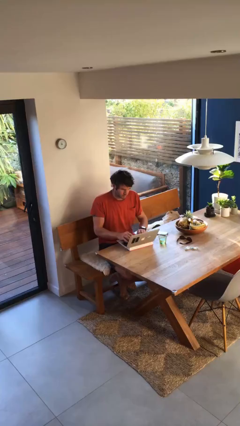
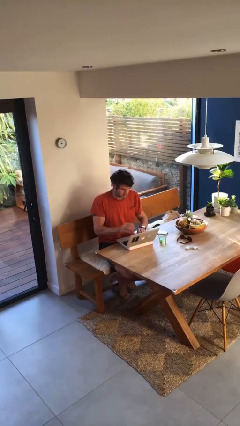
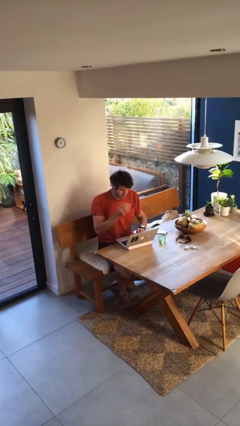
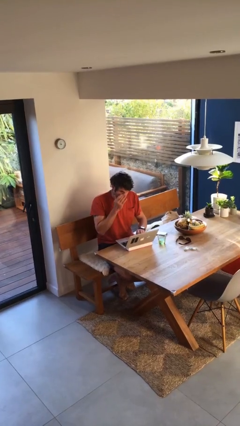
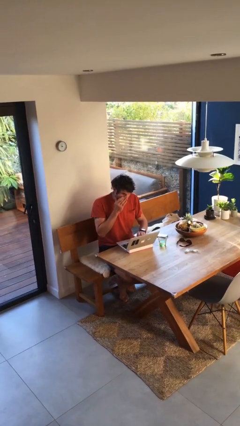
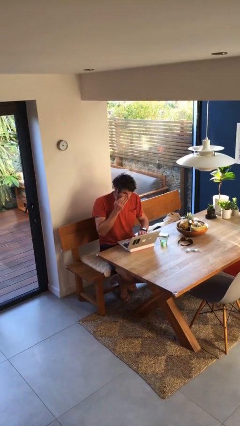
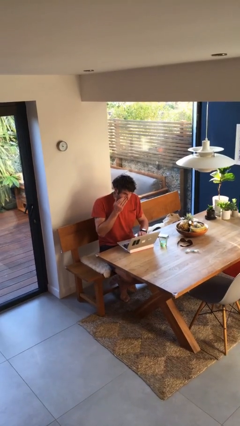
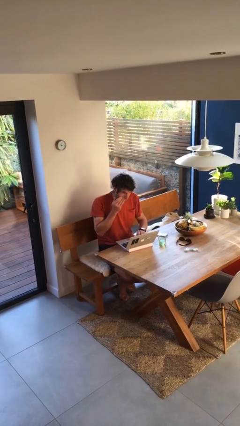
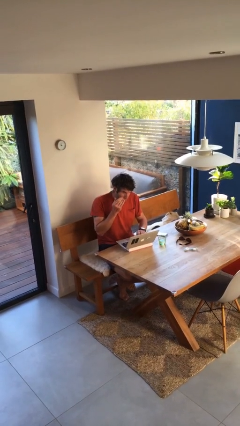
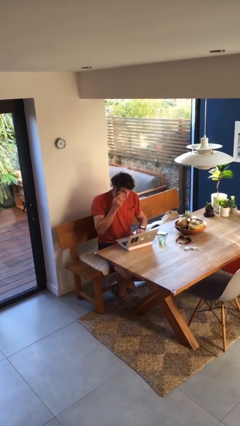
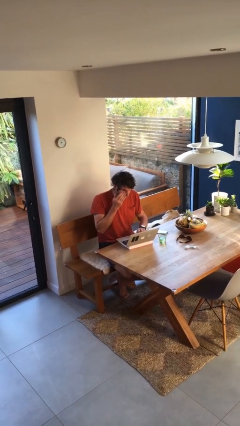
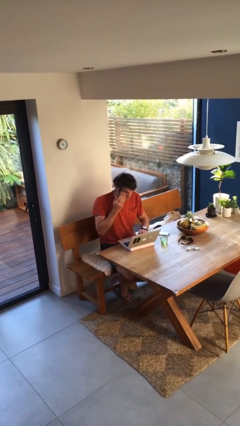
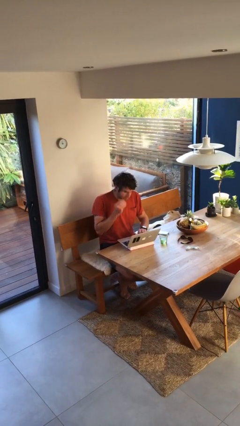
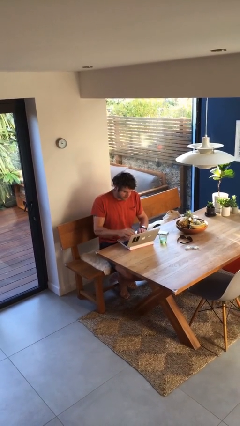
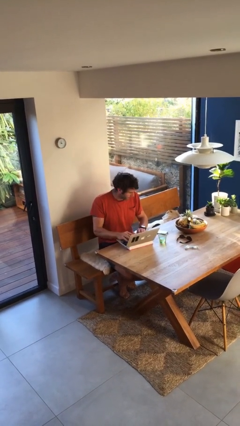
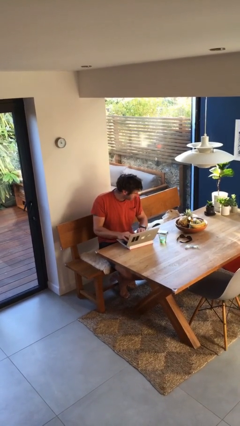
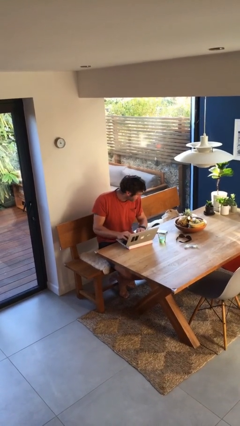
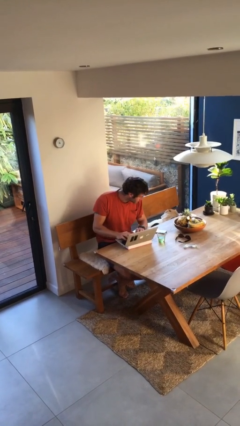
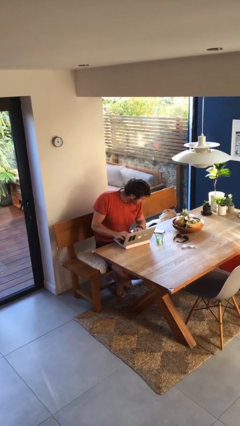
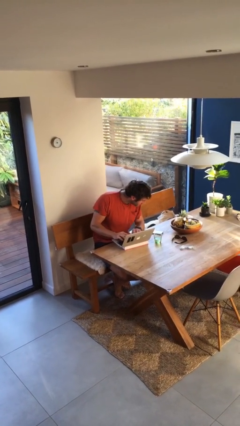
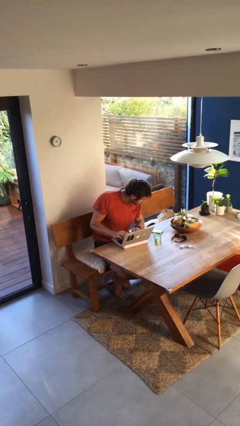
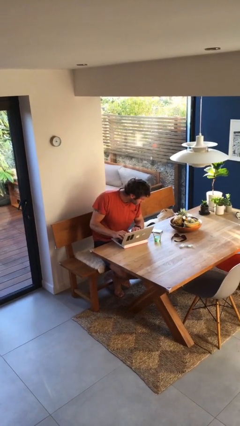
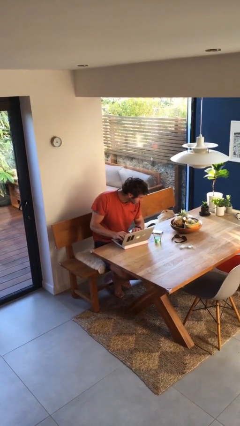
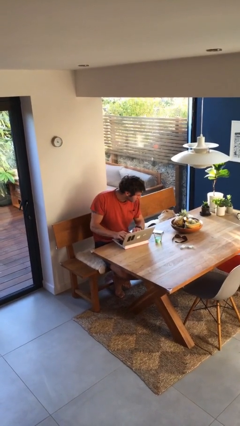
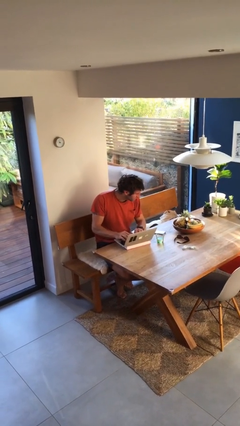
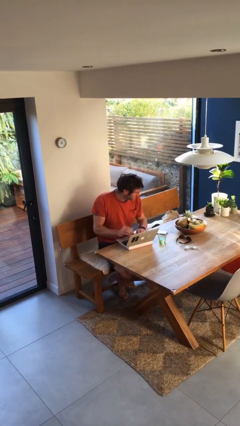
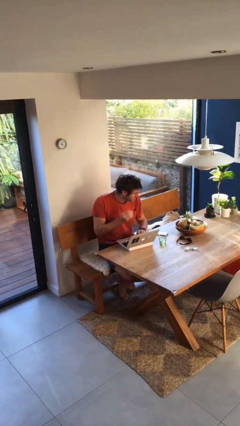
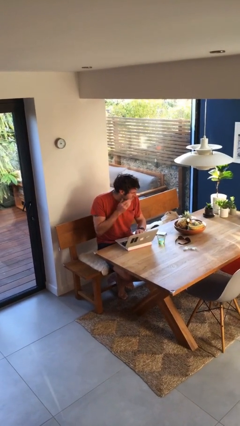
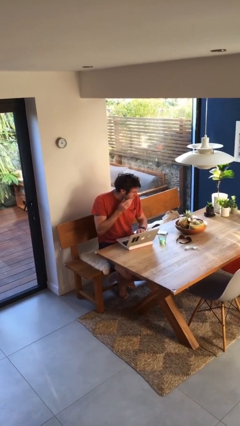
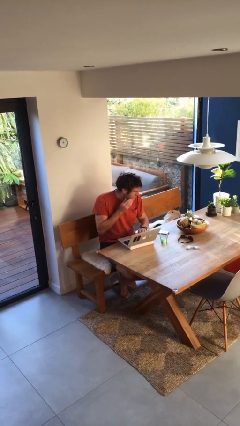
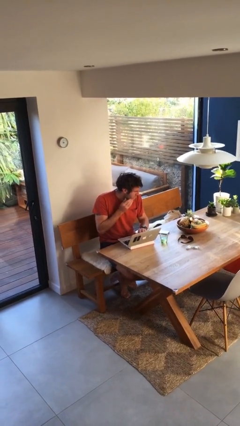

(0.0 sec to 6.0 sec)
person interacts with laptop

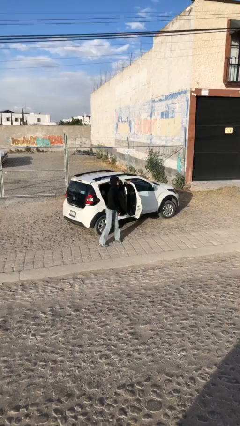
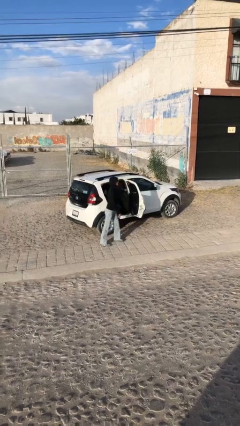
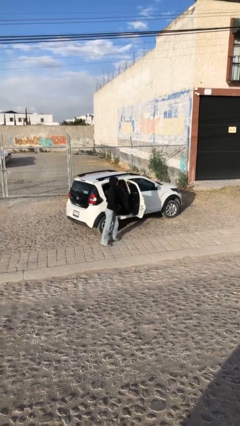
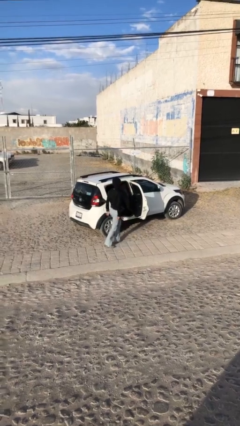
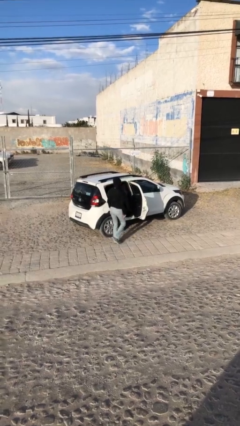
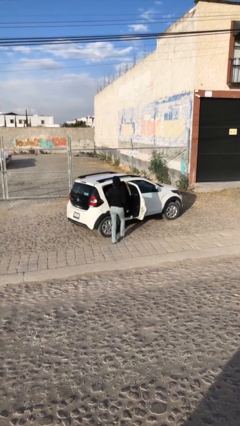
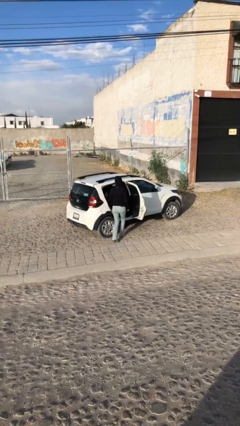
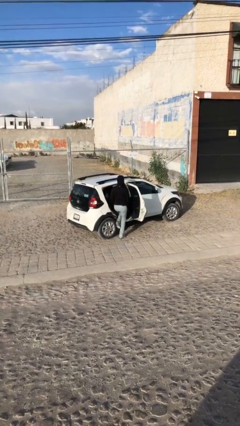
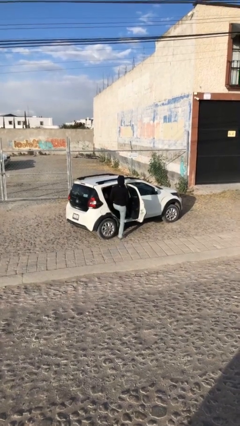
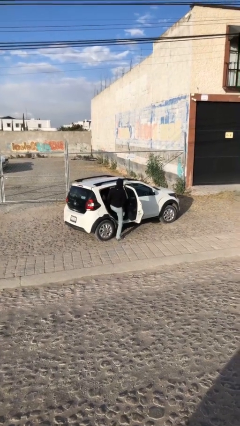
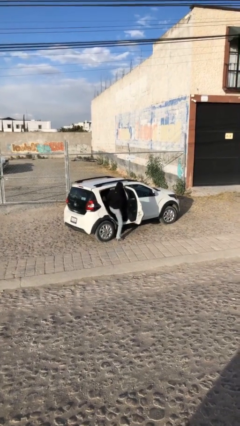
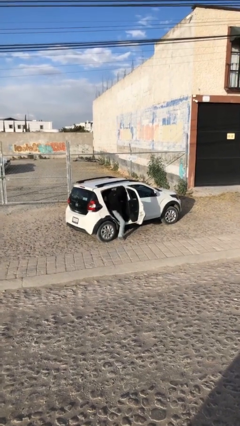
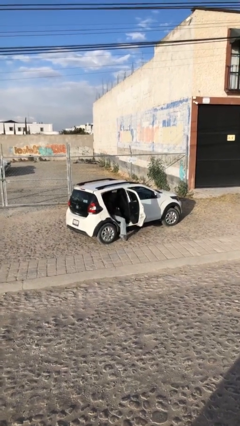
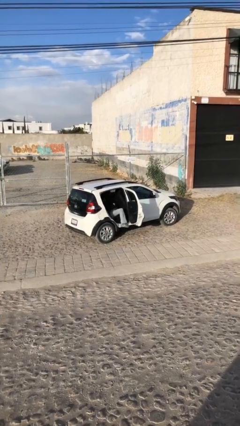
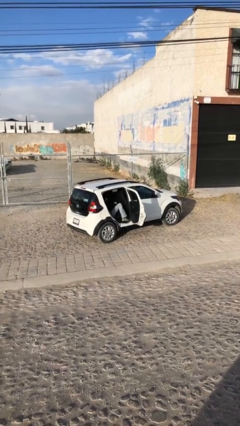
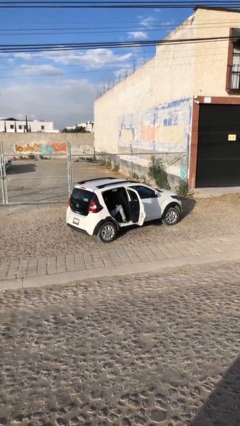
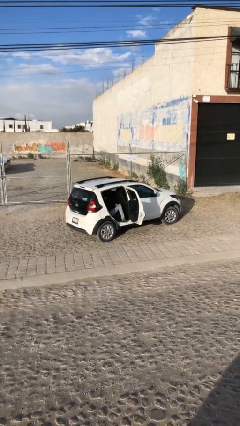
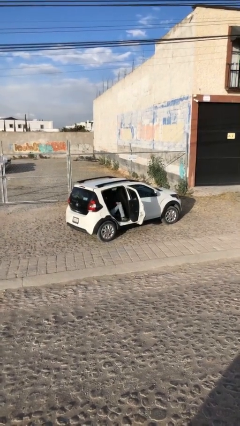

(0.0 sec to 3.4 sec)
person enters car

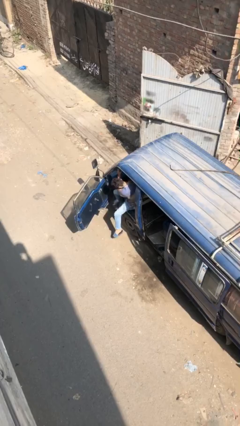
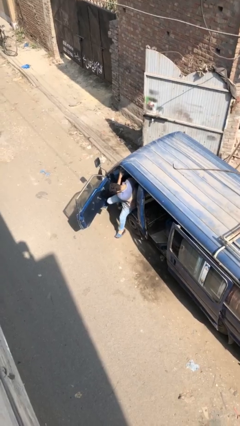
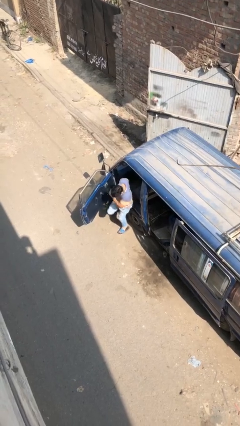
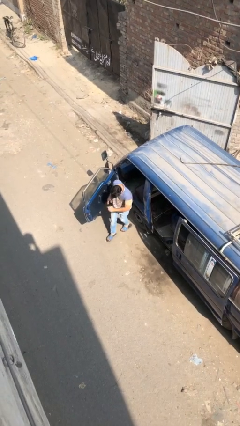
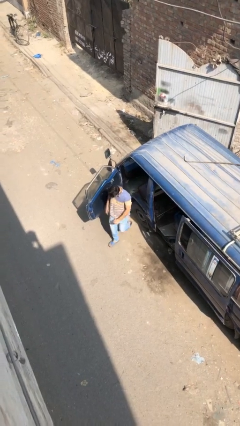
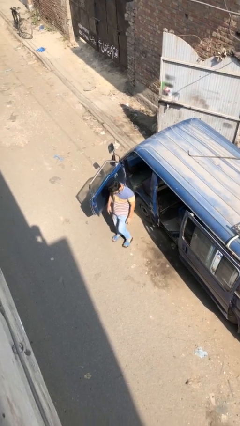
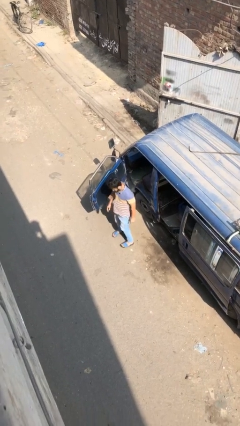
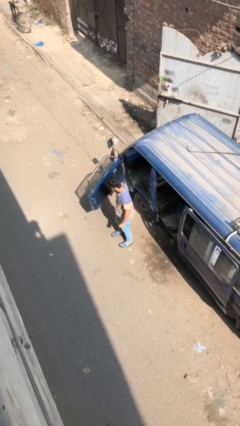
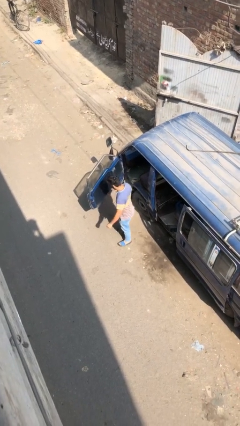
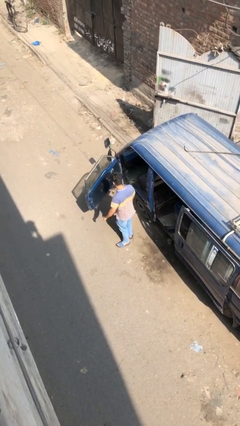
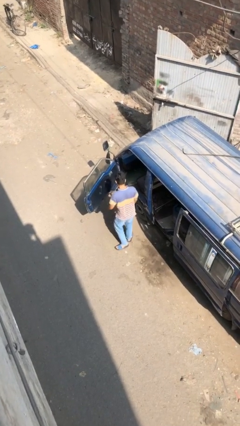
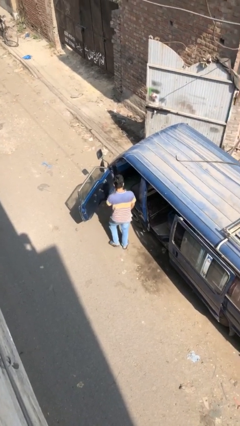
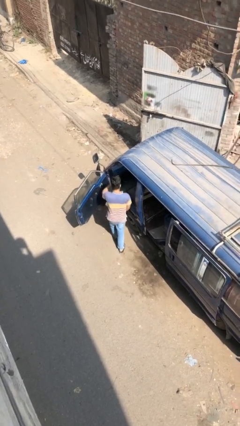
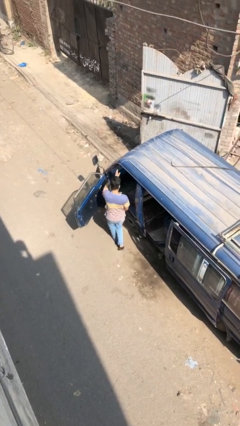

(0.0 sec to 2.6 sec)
person exits car

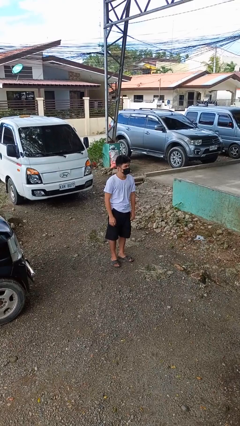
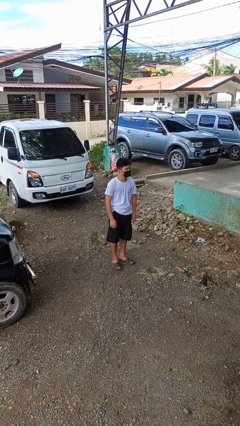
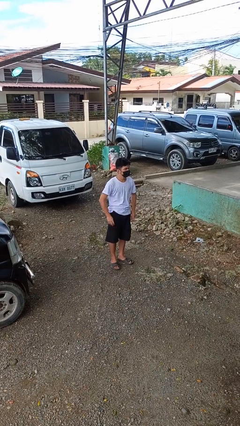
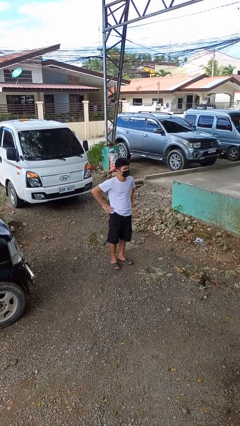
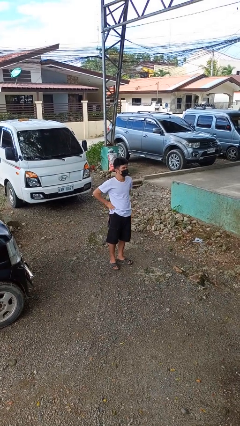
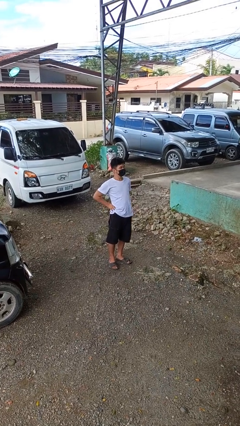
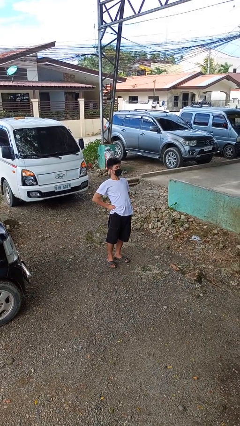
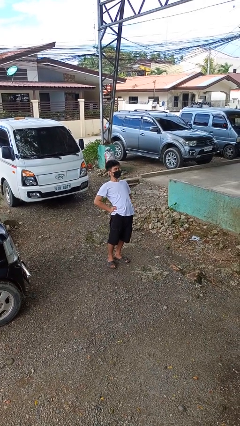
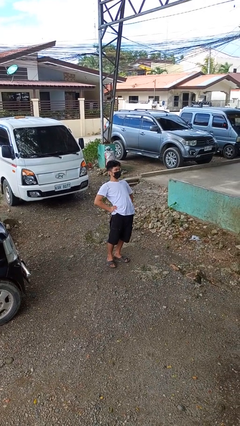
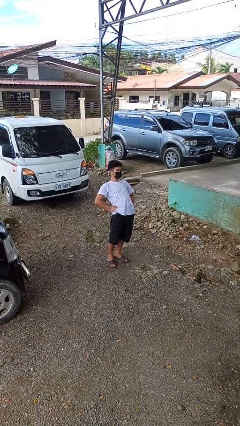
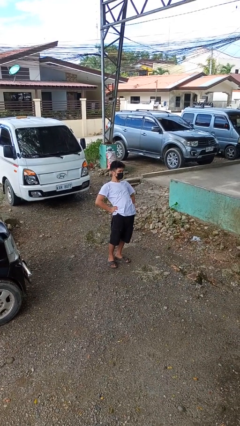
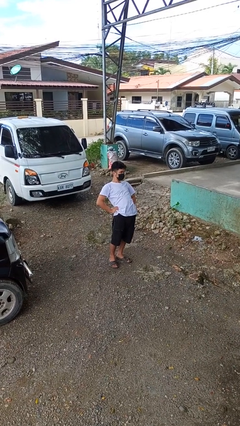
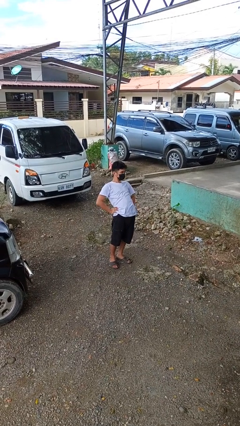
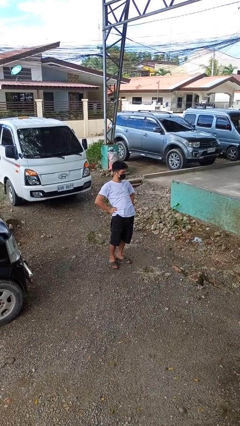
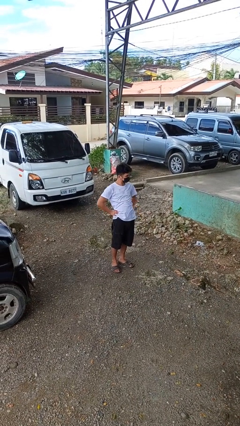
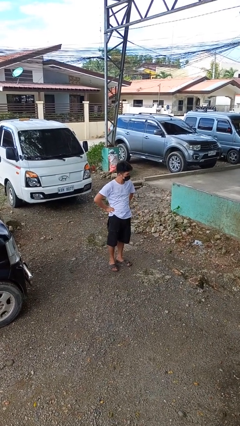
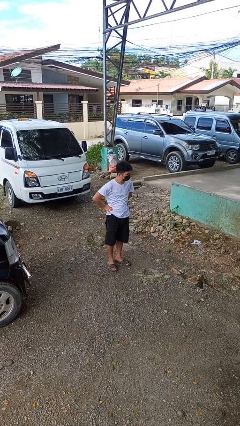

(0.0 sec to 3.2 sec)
person stretches back

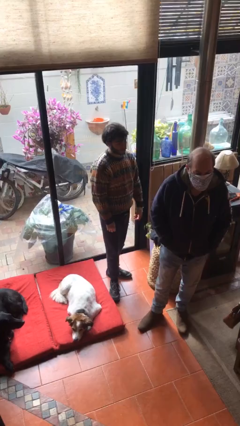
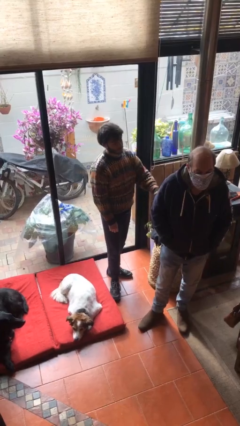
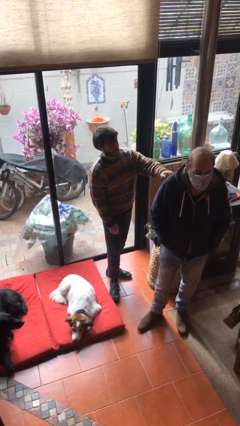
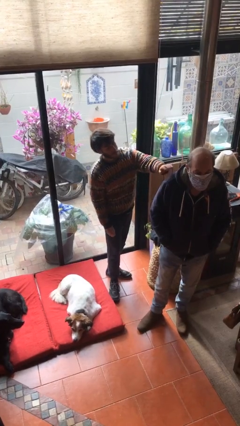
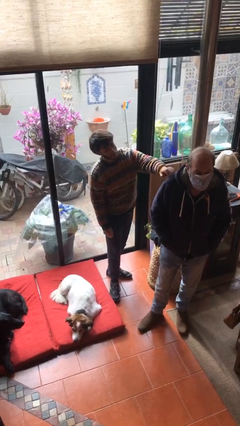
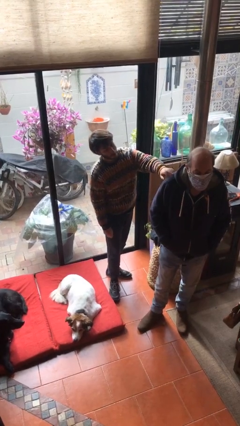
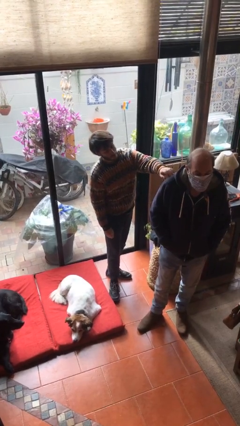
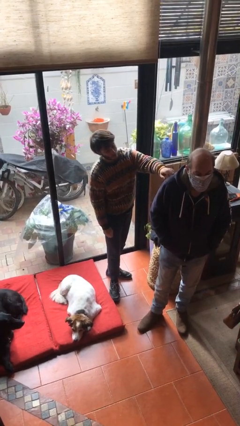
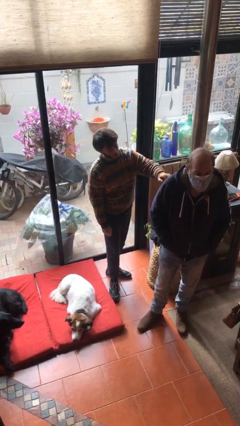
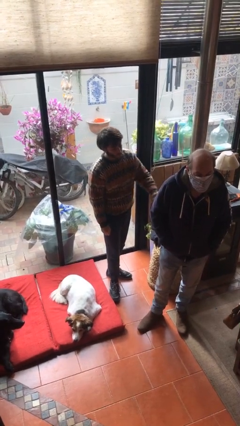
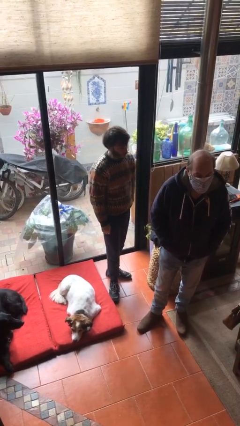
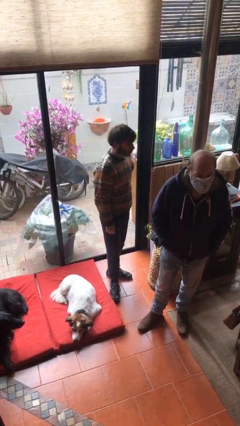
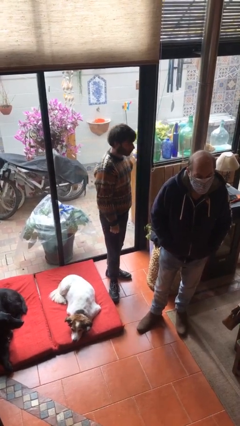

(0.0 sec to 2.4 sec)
person touches back of person
